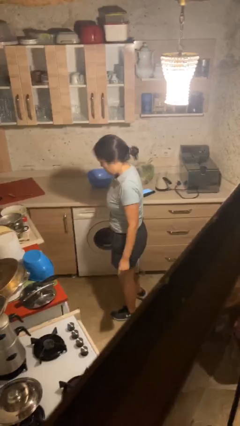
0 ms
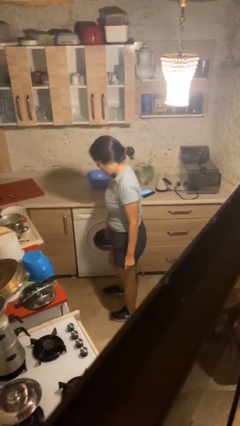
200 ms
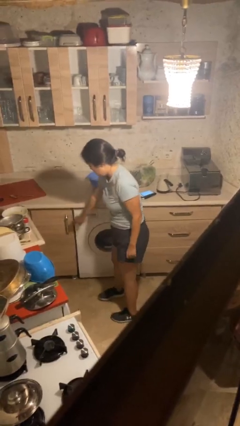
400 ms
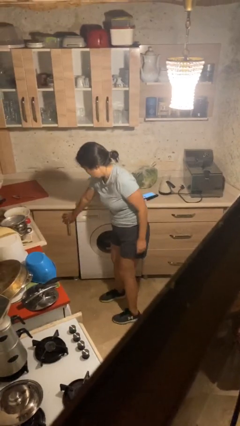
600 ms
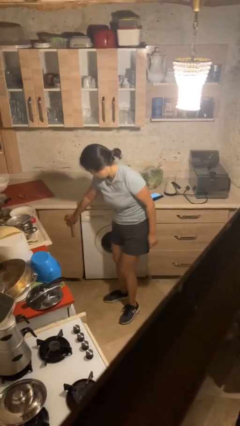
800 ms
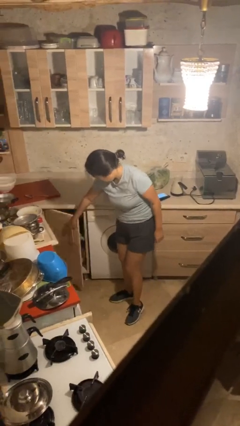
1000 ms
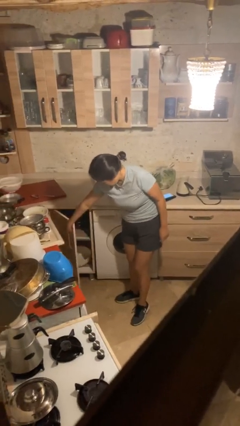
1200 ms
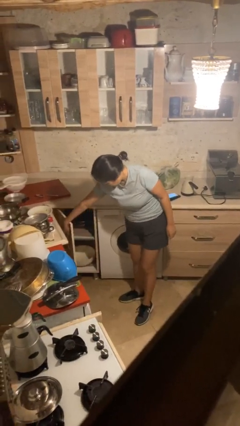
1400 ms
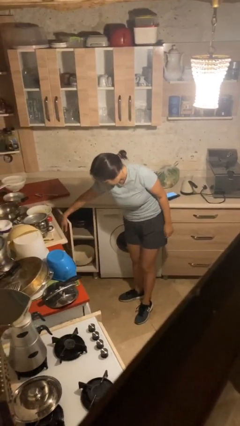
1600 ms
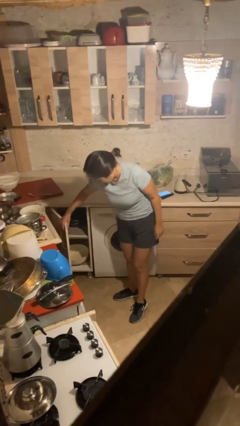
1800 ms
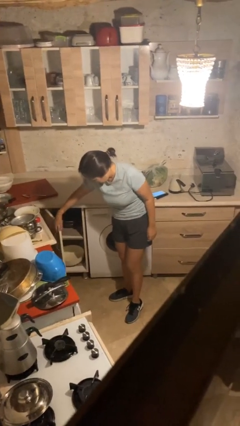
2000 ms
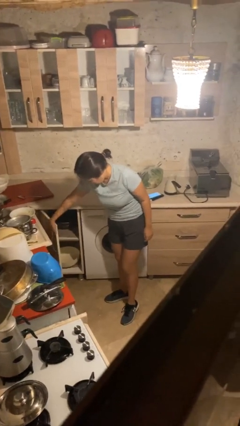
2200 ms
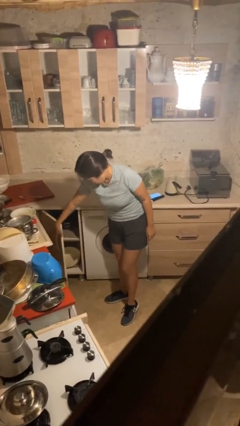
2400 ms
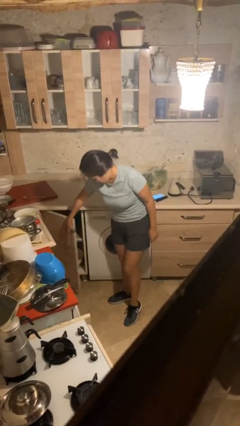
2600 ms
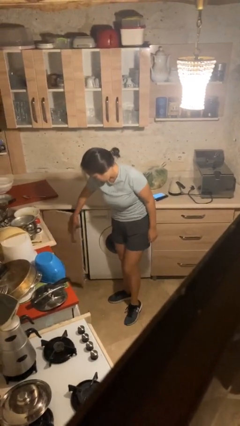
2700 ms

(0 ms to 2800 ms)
person closes cabinet

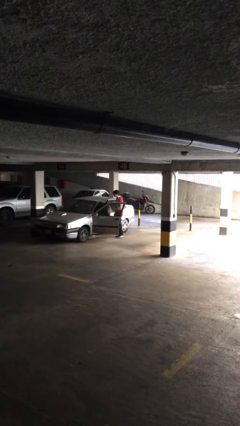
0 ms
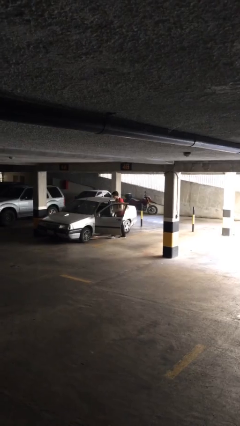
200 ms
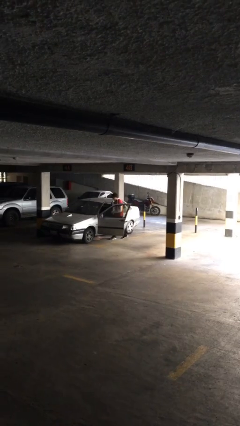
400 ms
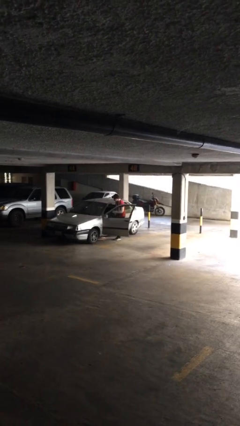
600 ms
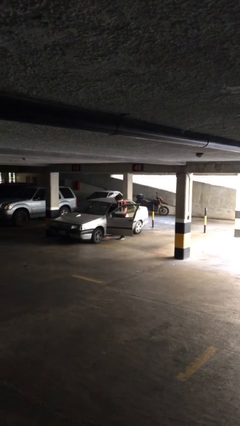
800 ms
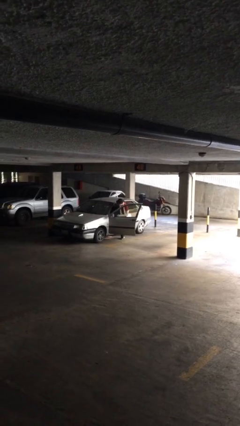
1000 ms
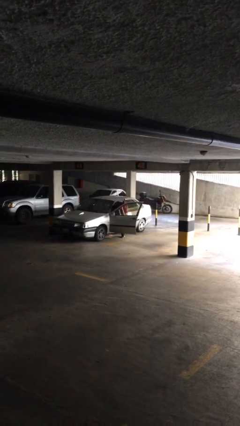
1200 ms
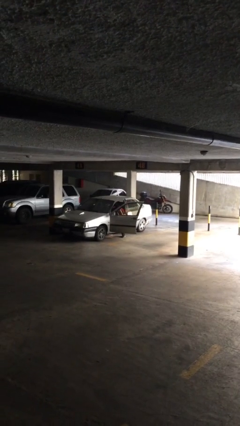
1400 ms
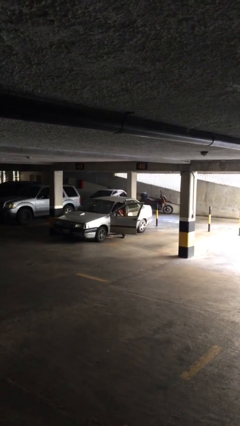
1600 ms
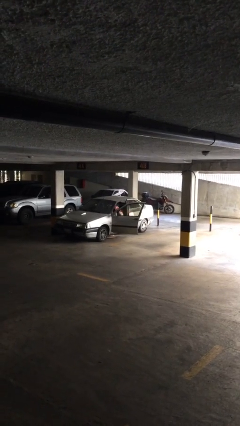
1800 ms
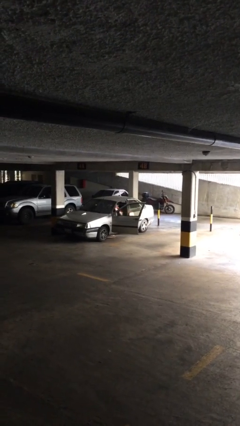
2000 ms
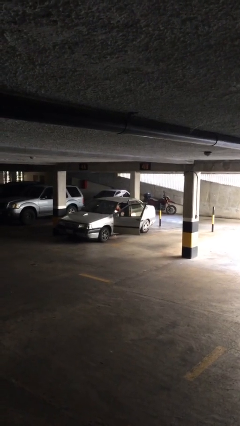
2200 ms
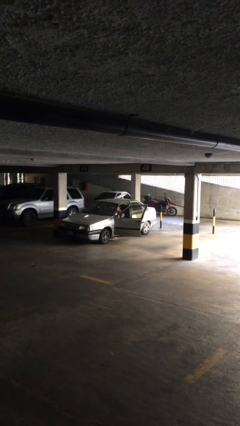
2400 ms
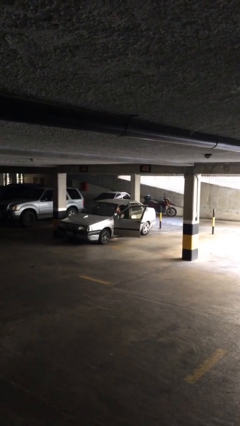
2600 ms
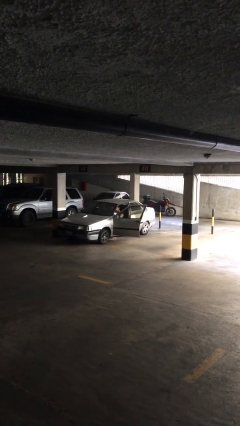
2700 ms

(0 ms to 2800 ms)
person enters car

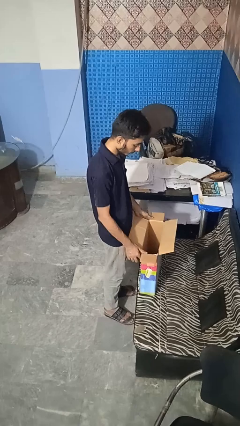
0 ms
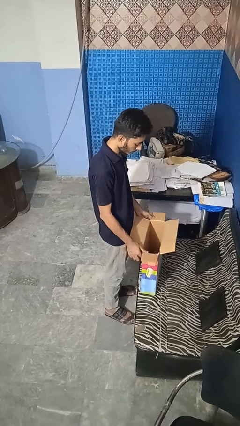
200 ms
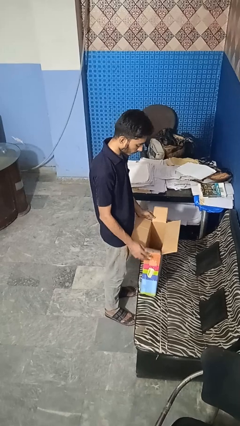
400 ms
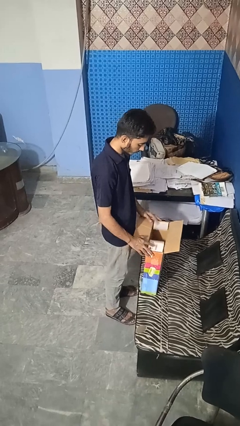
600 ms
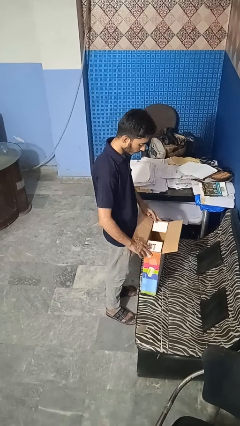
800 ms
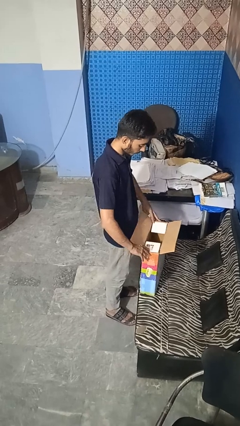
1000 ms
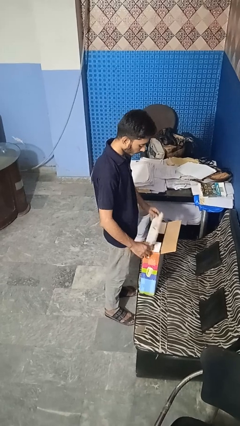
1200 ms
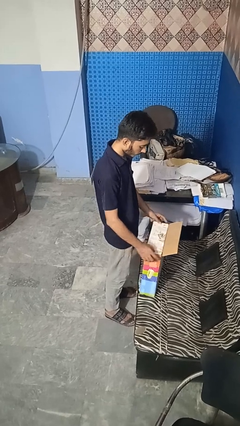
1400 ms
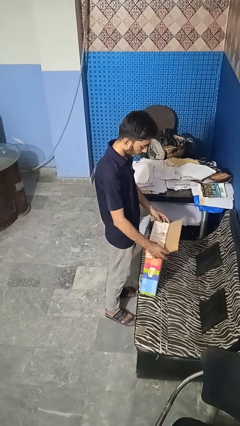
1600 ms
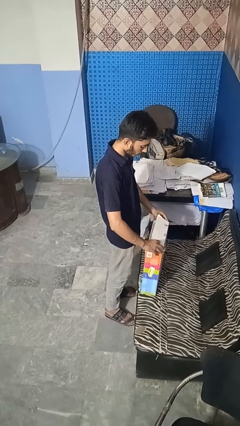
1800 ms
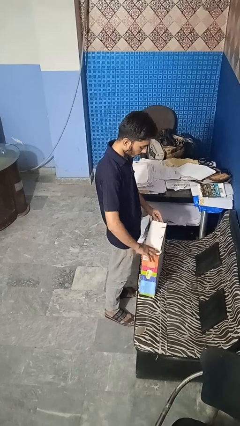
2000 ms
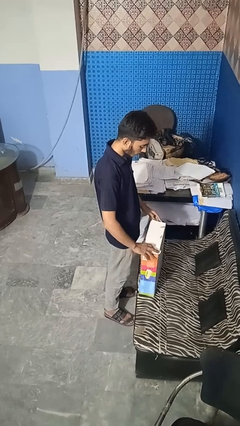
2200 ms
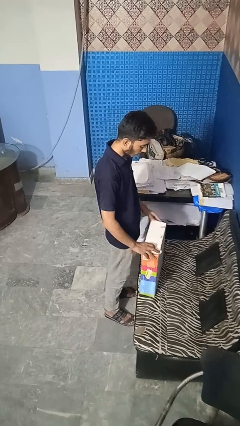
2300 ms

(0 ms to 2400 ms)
person closes box

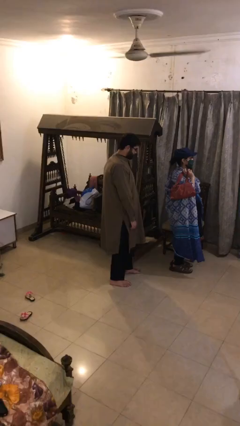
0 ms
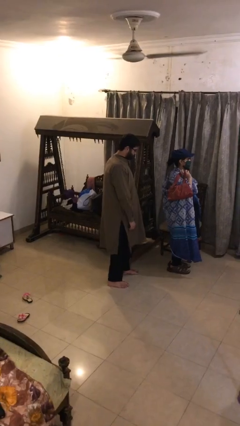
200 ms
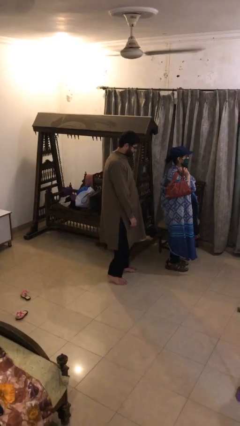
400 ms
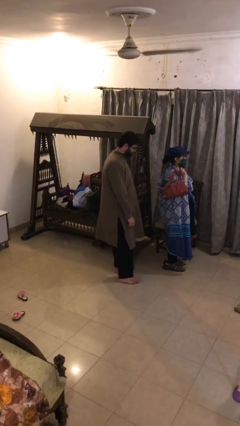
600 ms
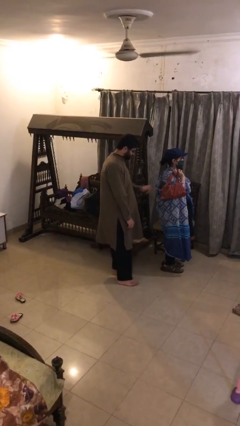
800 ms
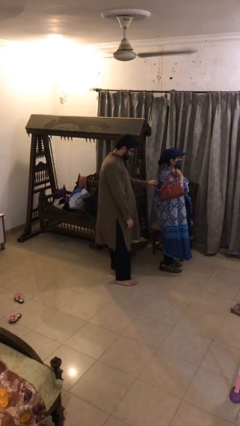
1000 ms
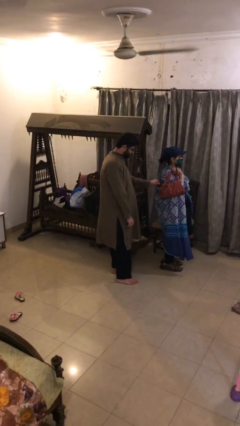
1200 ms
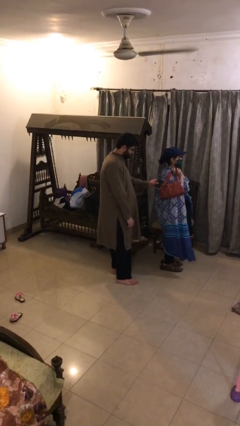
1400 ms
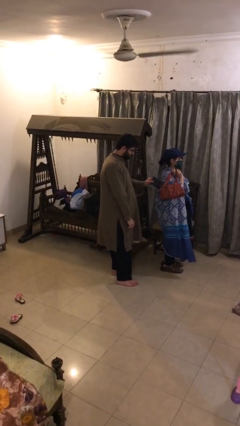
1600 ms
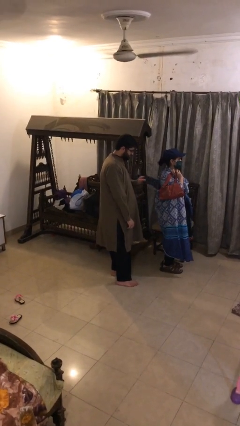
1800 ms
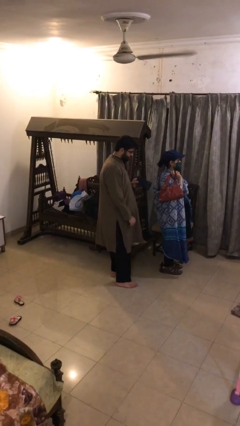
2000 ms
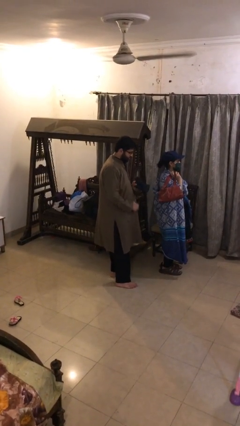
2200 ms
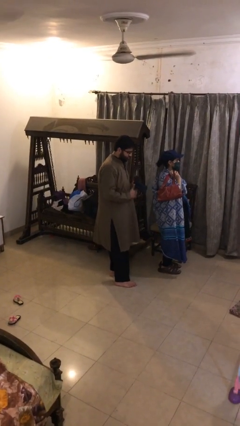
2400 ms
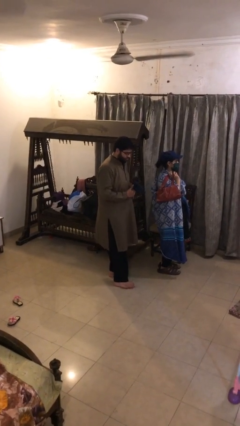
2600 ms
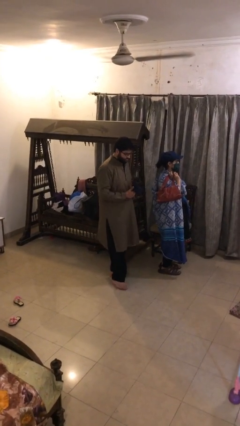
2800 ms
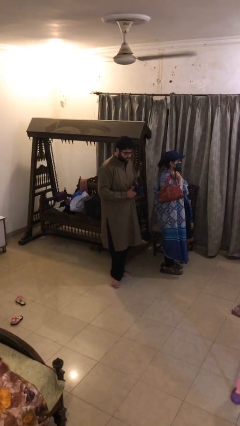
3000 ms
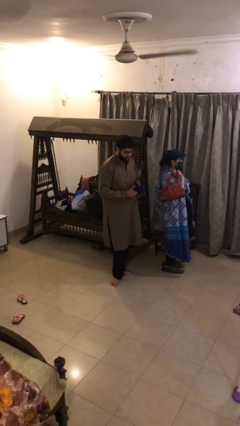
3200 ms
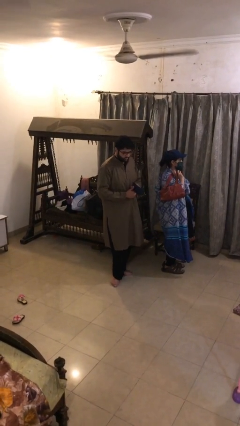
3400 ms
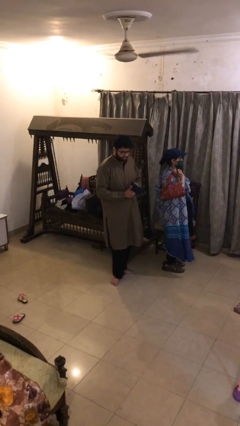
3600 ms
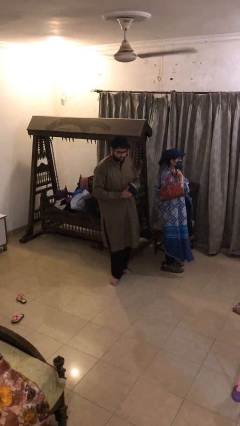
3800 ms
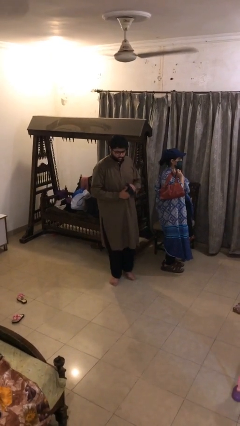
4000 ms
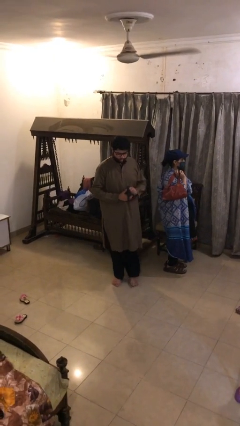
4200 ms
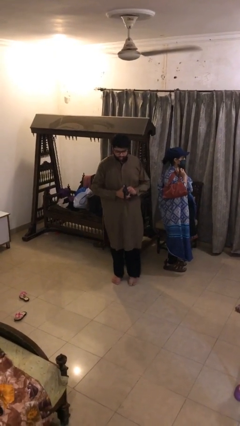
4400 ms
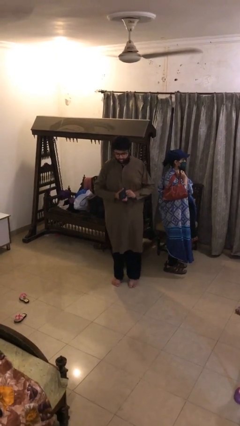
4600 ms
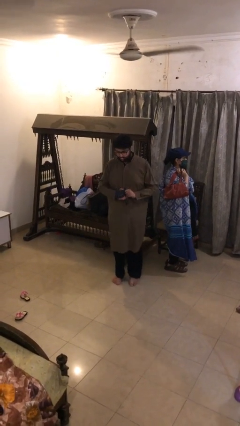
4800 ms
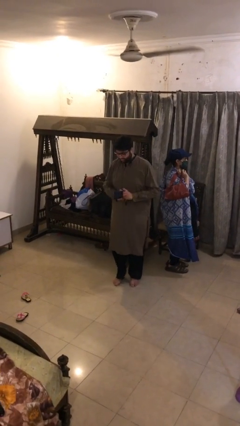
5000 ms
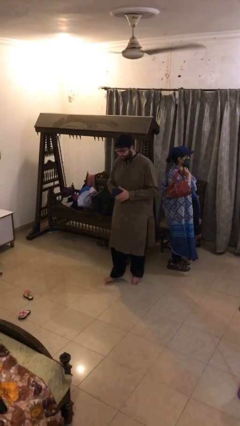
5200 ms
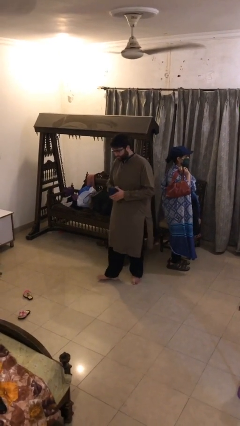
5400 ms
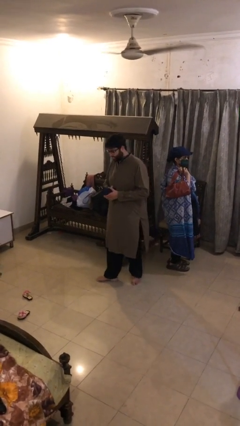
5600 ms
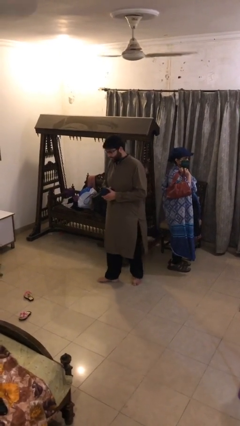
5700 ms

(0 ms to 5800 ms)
person steals object from person

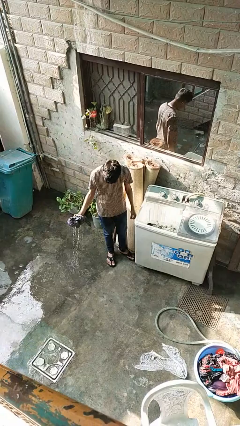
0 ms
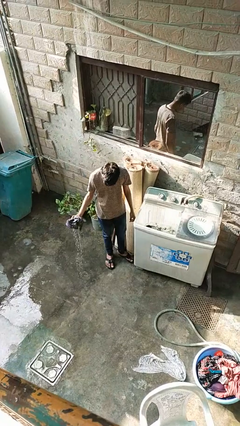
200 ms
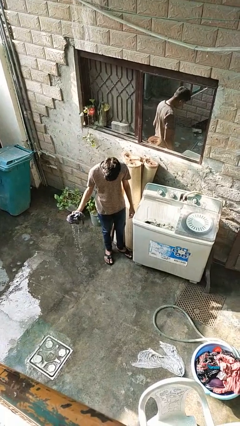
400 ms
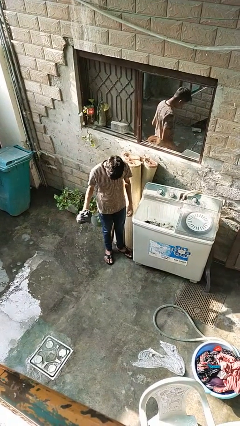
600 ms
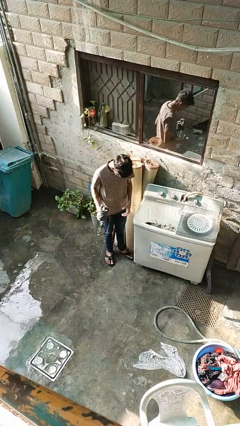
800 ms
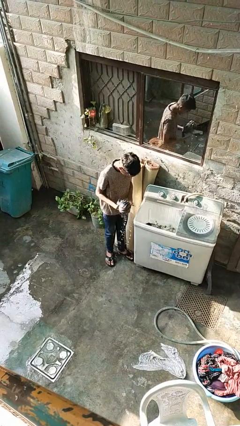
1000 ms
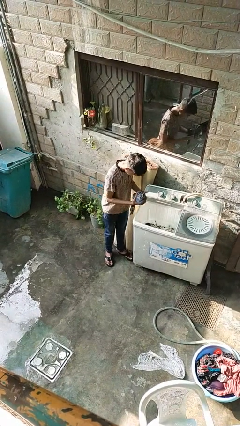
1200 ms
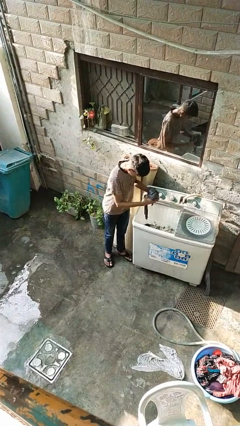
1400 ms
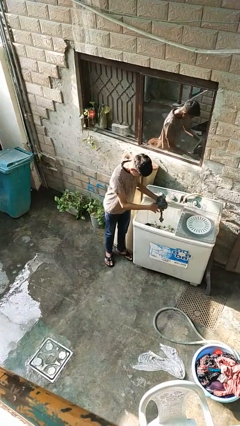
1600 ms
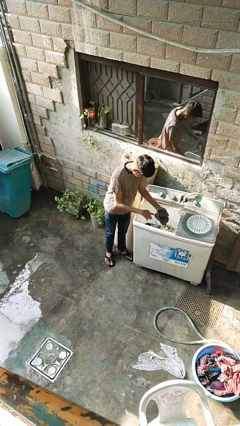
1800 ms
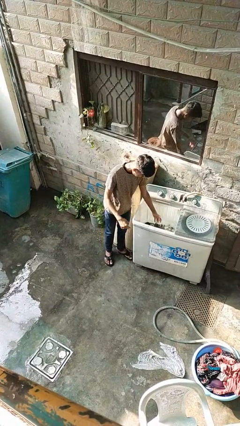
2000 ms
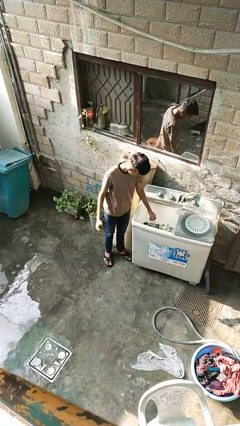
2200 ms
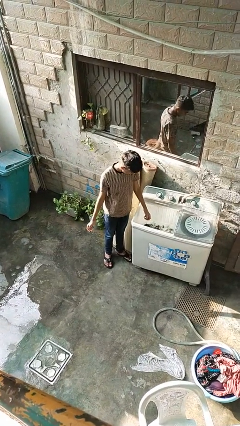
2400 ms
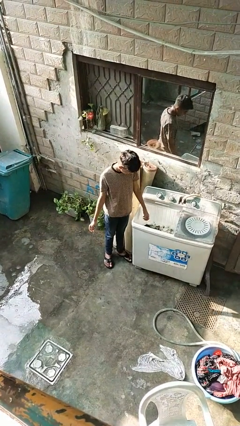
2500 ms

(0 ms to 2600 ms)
person loads clotheswasher

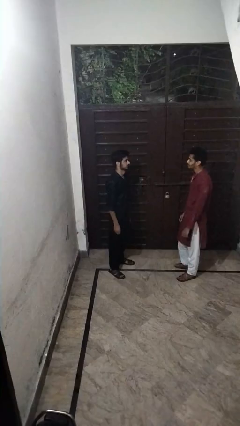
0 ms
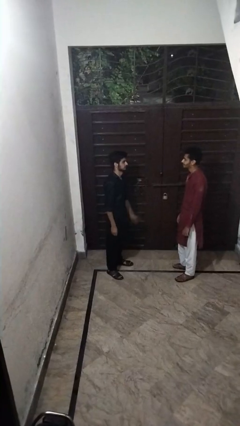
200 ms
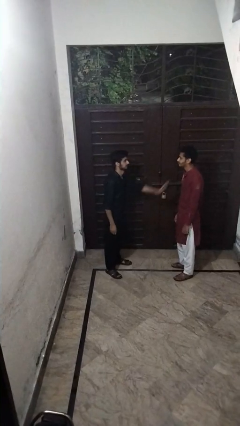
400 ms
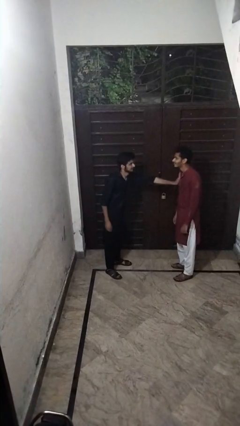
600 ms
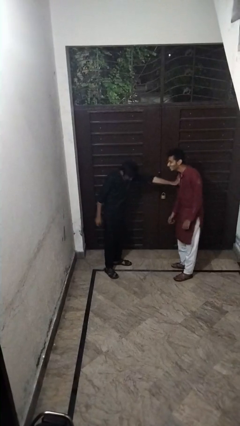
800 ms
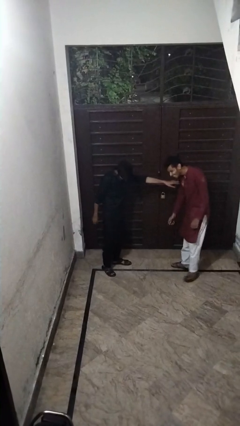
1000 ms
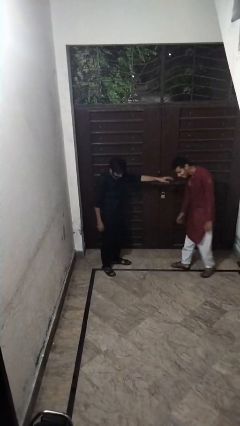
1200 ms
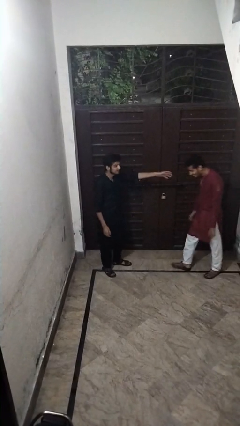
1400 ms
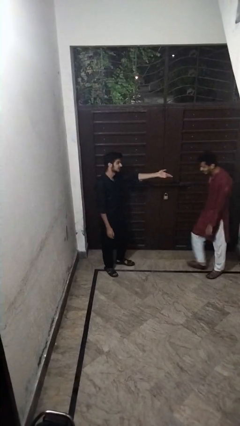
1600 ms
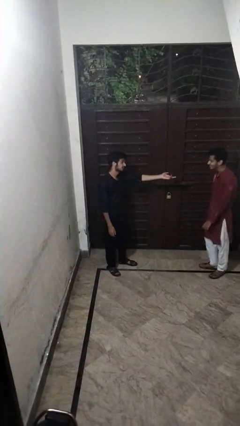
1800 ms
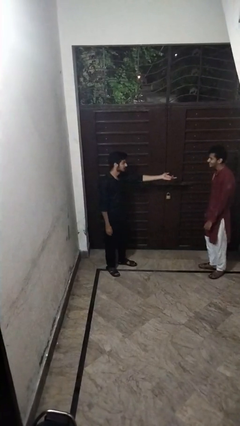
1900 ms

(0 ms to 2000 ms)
person shoves person
